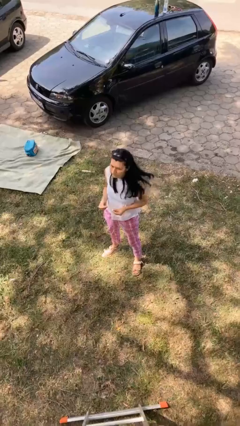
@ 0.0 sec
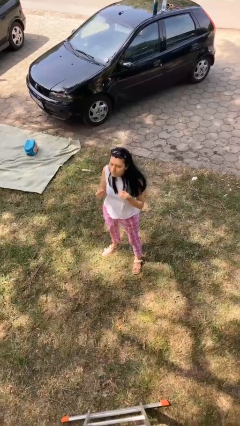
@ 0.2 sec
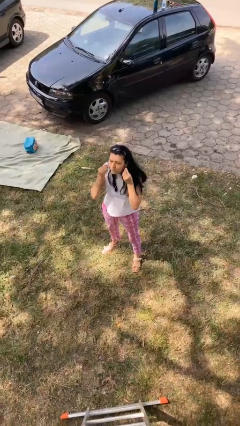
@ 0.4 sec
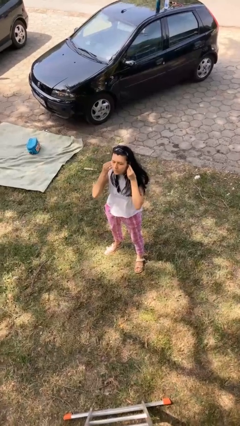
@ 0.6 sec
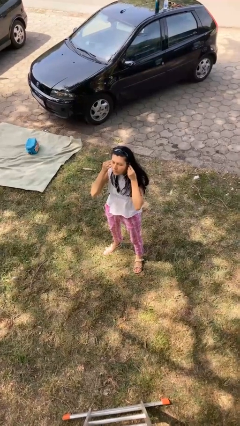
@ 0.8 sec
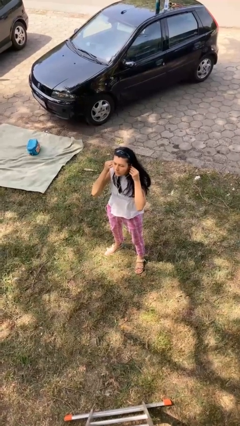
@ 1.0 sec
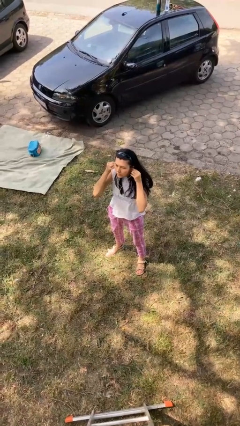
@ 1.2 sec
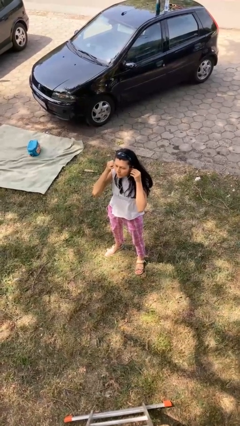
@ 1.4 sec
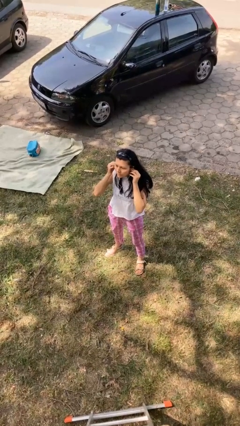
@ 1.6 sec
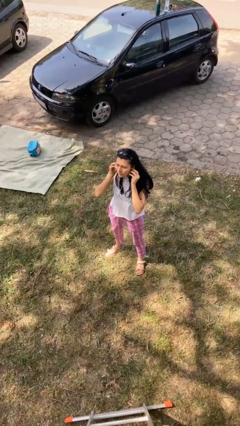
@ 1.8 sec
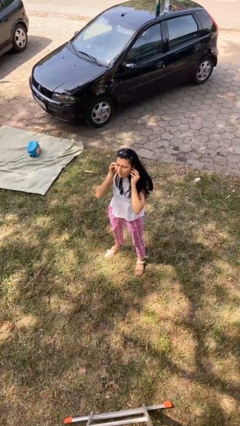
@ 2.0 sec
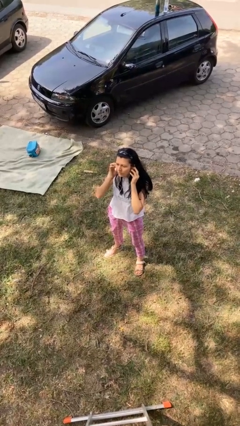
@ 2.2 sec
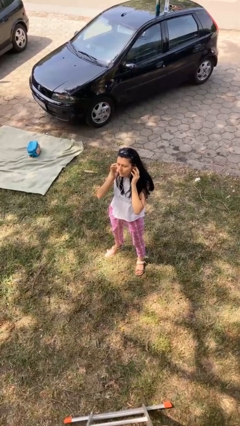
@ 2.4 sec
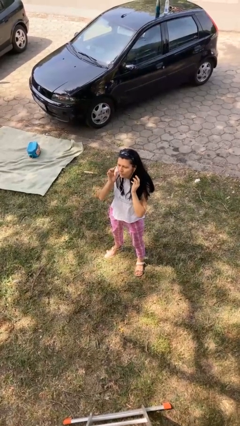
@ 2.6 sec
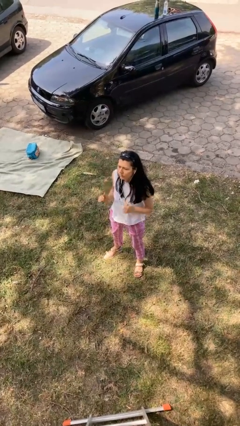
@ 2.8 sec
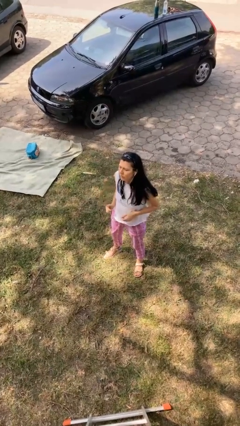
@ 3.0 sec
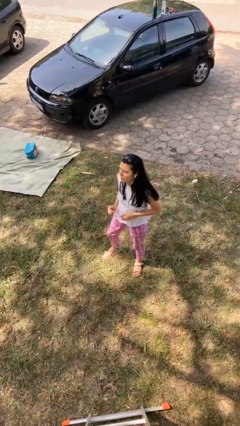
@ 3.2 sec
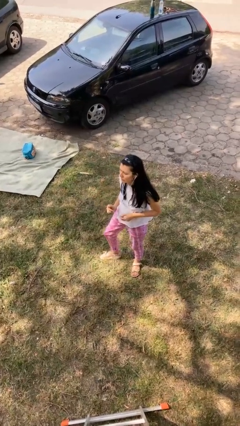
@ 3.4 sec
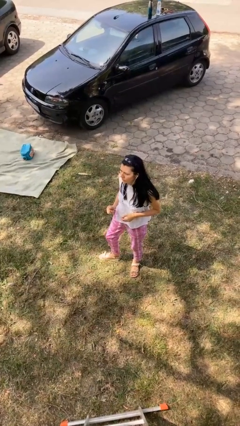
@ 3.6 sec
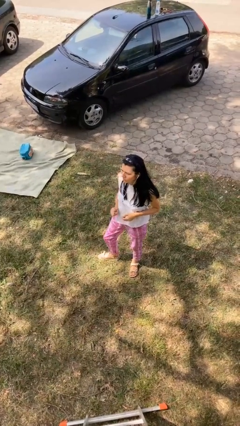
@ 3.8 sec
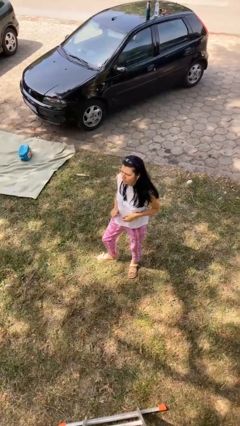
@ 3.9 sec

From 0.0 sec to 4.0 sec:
person puts on headphones

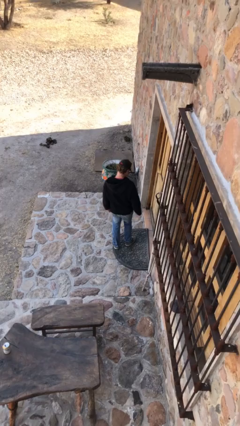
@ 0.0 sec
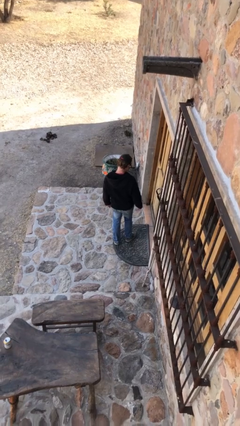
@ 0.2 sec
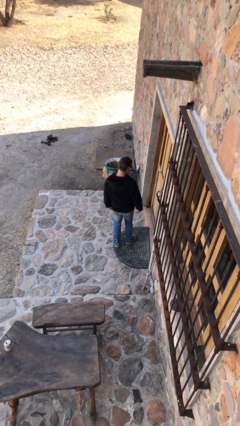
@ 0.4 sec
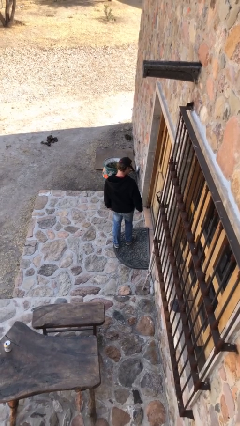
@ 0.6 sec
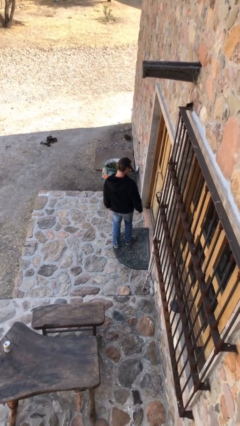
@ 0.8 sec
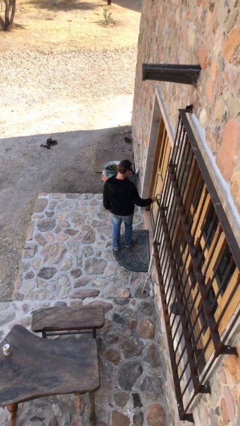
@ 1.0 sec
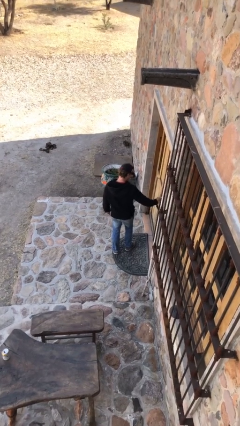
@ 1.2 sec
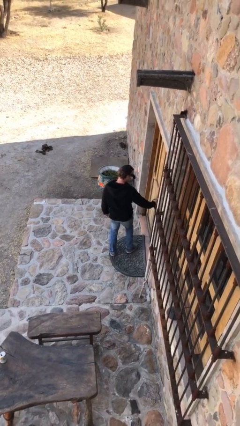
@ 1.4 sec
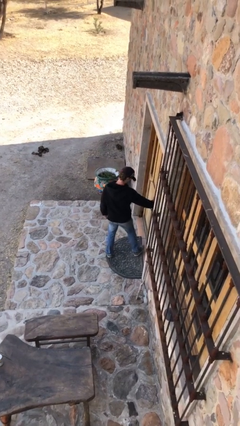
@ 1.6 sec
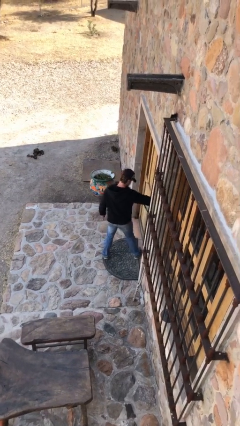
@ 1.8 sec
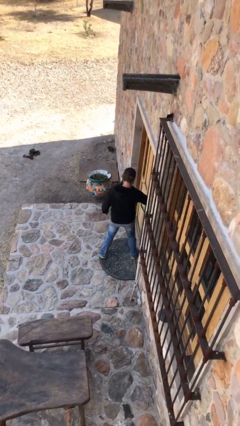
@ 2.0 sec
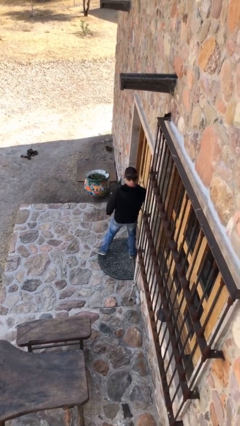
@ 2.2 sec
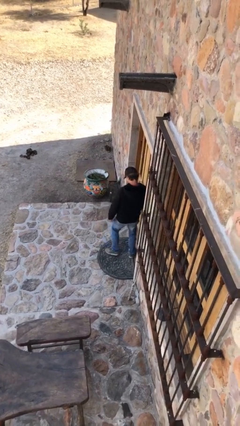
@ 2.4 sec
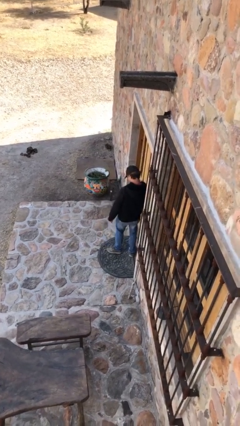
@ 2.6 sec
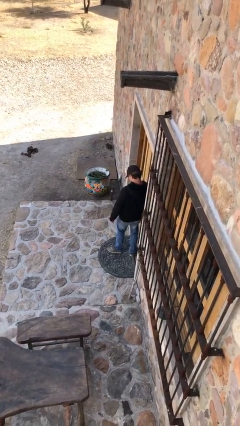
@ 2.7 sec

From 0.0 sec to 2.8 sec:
person opens facility door

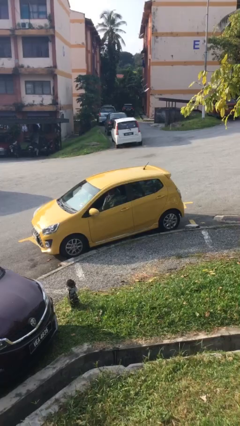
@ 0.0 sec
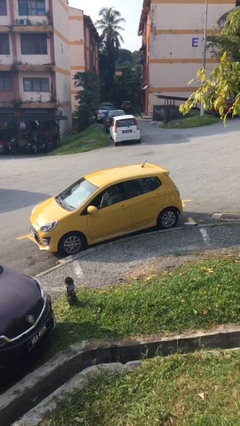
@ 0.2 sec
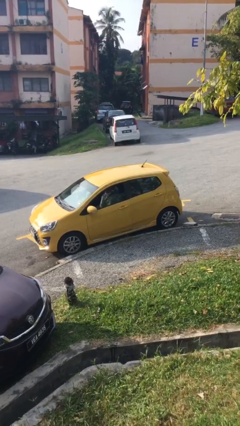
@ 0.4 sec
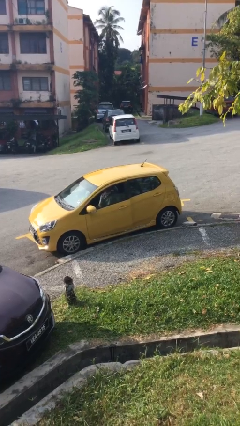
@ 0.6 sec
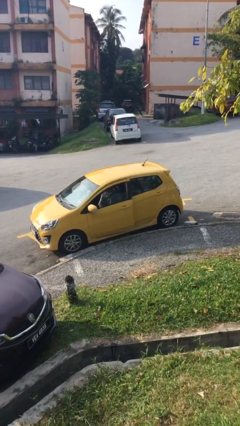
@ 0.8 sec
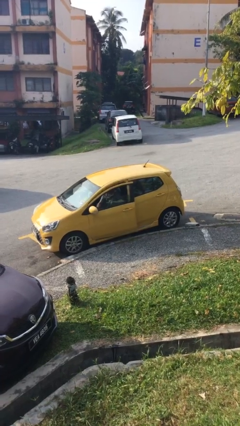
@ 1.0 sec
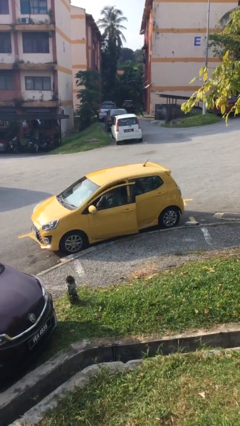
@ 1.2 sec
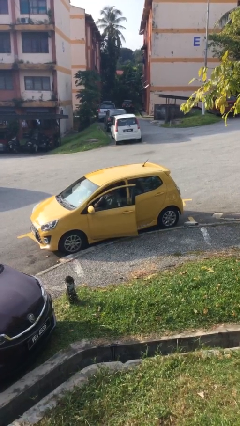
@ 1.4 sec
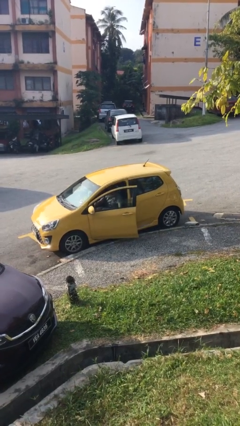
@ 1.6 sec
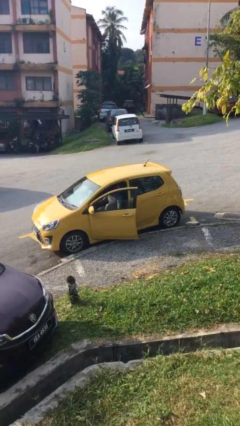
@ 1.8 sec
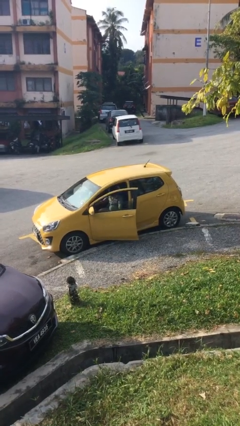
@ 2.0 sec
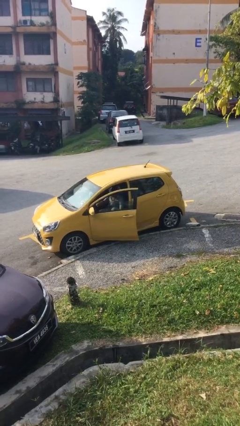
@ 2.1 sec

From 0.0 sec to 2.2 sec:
person opens car door

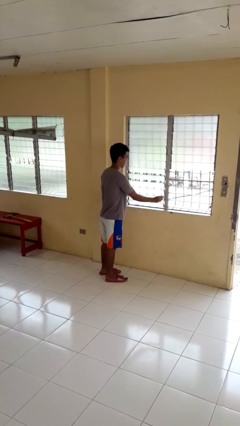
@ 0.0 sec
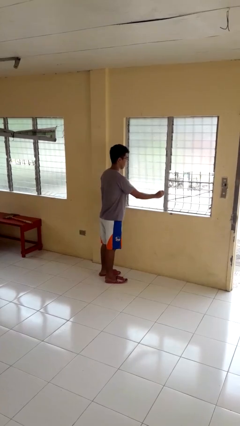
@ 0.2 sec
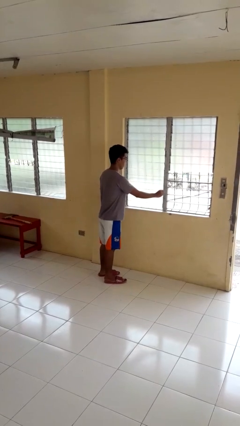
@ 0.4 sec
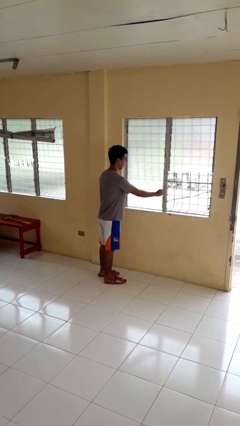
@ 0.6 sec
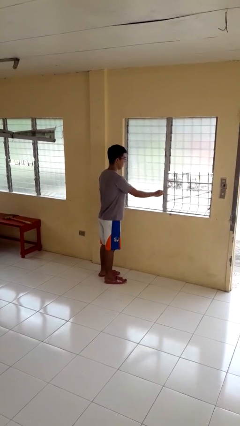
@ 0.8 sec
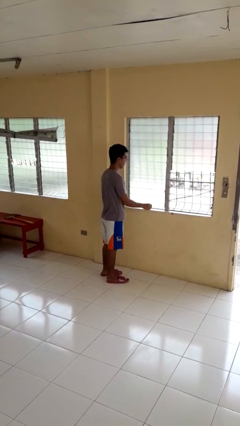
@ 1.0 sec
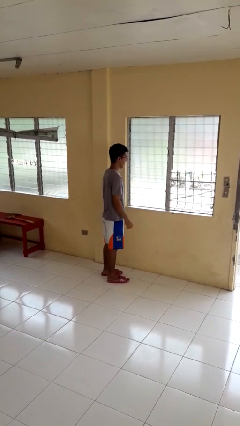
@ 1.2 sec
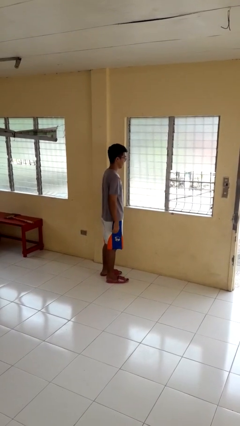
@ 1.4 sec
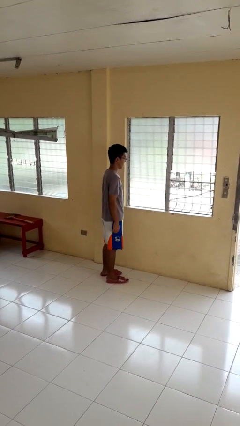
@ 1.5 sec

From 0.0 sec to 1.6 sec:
person closes home window

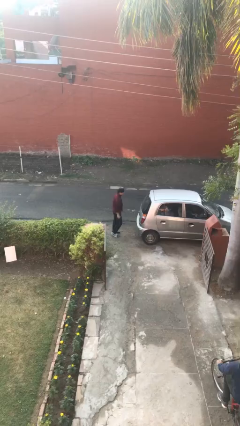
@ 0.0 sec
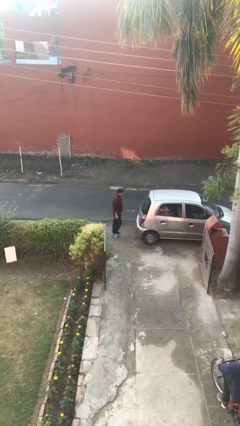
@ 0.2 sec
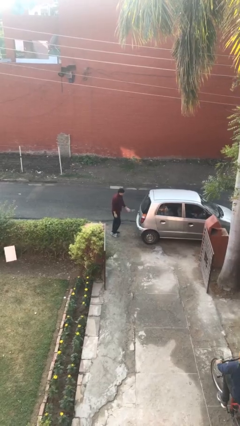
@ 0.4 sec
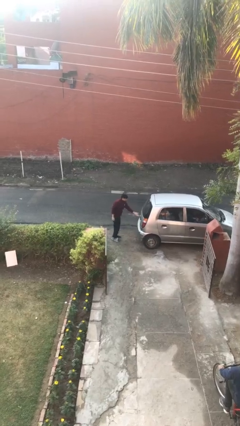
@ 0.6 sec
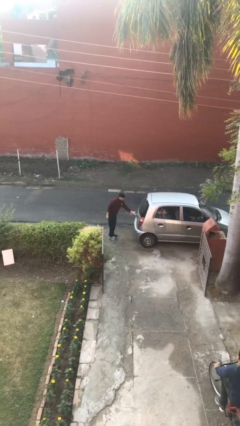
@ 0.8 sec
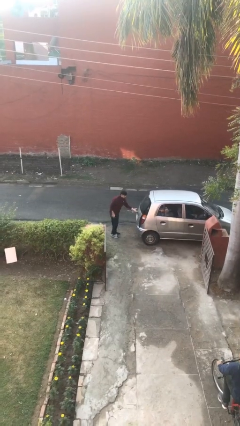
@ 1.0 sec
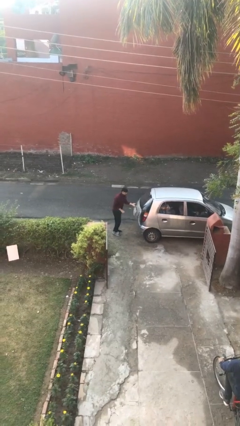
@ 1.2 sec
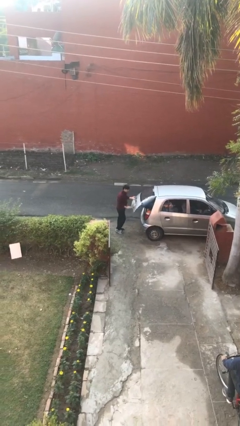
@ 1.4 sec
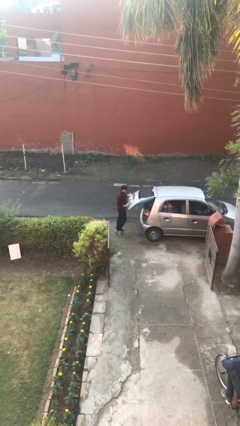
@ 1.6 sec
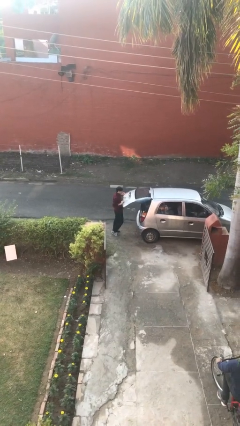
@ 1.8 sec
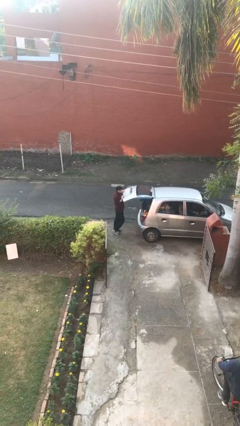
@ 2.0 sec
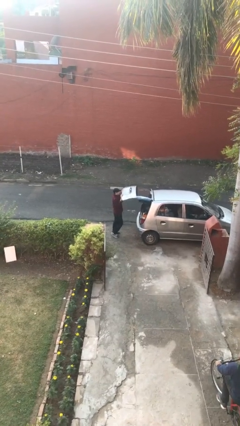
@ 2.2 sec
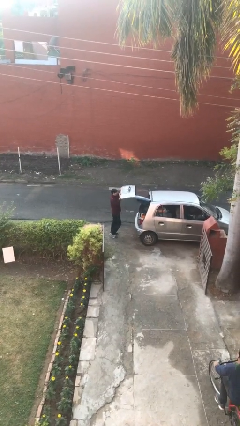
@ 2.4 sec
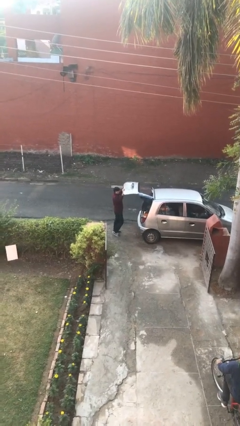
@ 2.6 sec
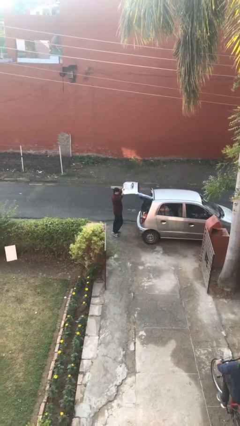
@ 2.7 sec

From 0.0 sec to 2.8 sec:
person opens car trunk

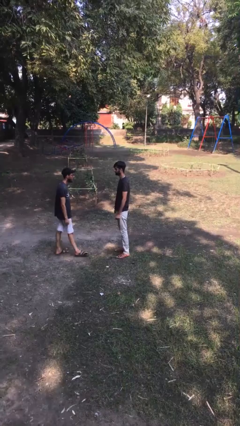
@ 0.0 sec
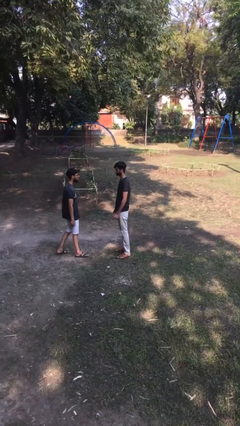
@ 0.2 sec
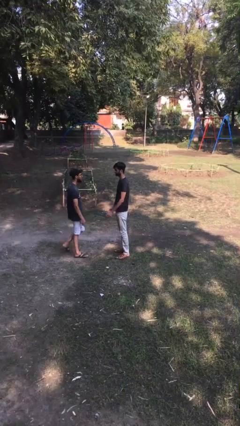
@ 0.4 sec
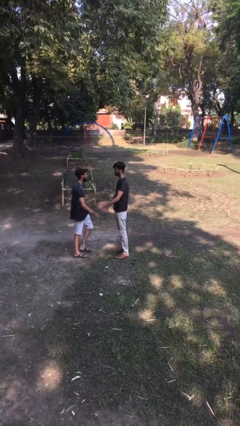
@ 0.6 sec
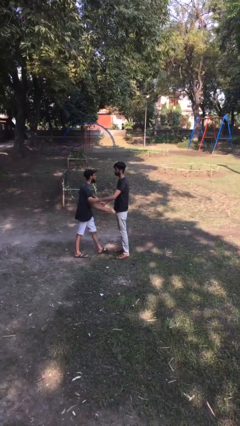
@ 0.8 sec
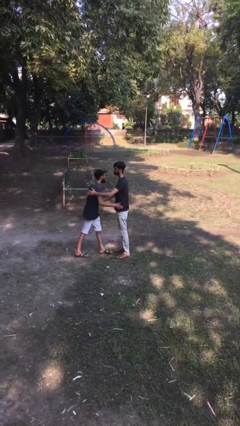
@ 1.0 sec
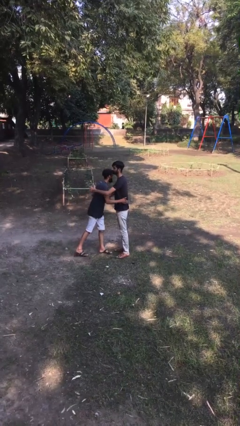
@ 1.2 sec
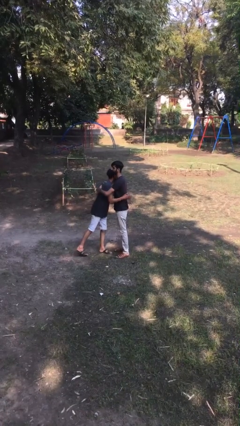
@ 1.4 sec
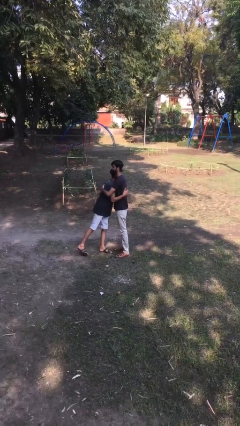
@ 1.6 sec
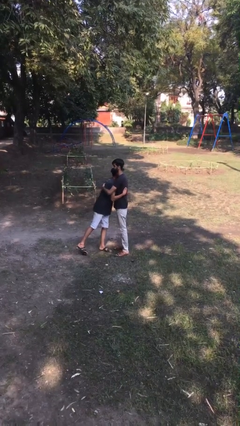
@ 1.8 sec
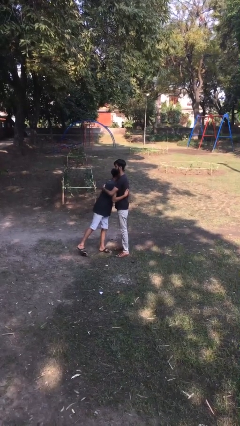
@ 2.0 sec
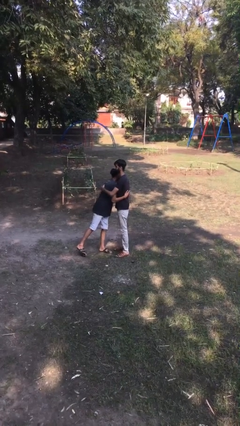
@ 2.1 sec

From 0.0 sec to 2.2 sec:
person embraces person

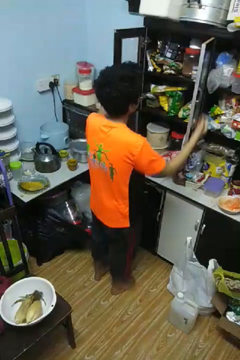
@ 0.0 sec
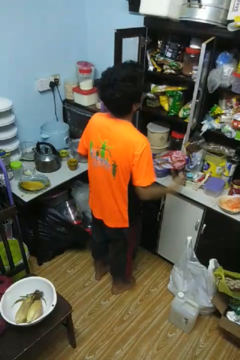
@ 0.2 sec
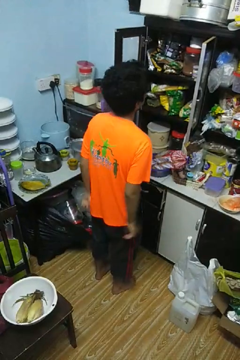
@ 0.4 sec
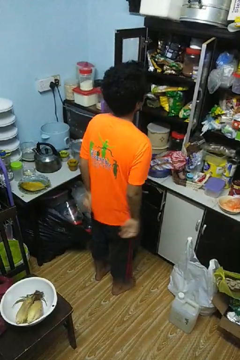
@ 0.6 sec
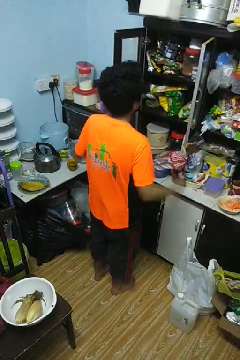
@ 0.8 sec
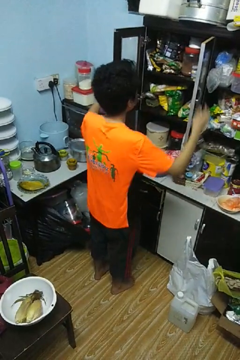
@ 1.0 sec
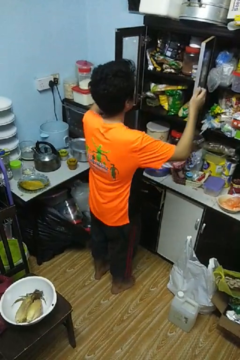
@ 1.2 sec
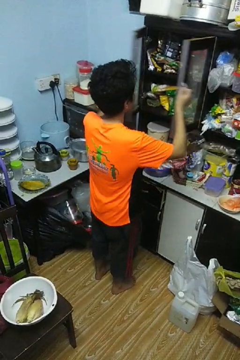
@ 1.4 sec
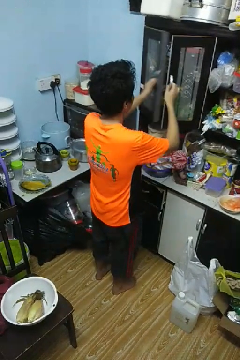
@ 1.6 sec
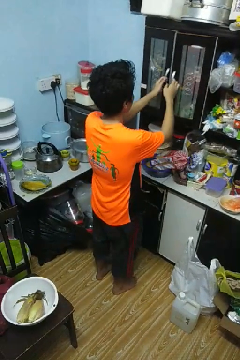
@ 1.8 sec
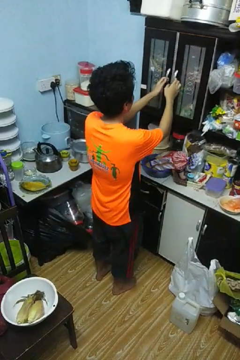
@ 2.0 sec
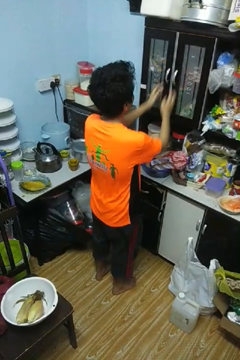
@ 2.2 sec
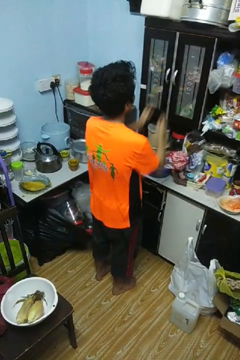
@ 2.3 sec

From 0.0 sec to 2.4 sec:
person closes cabinet
